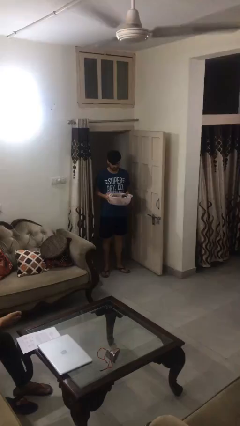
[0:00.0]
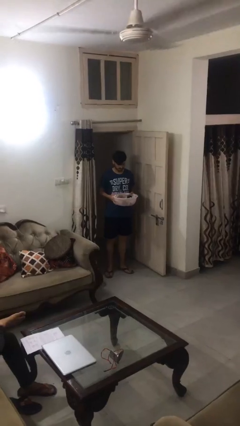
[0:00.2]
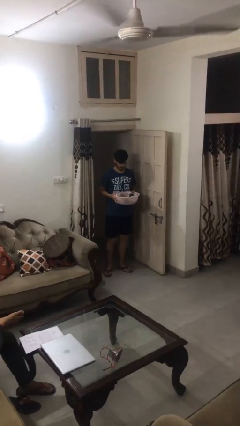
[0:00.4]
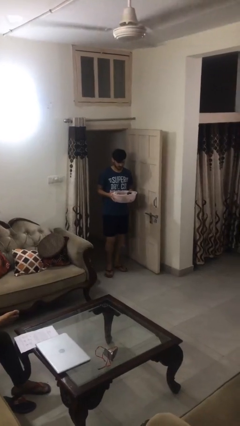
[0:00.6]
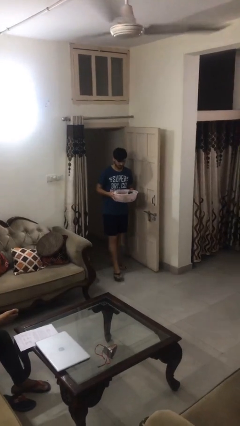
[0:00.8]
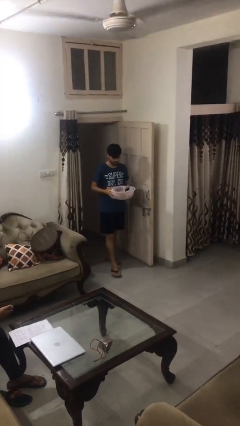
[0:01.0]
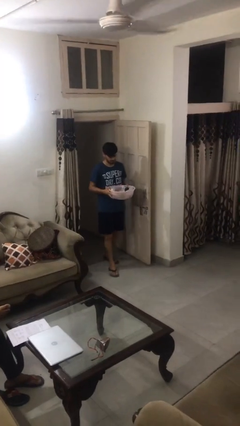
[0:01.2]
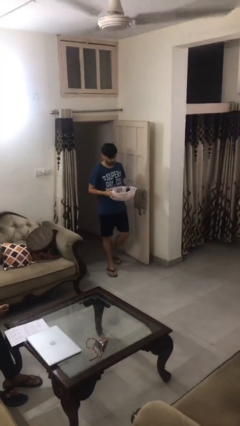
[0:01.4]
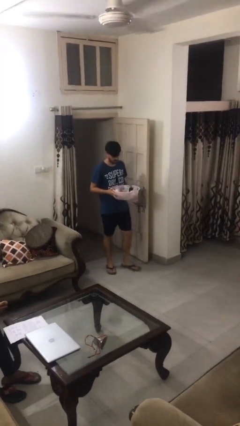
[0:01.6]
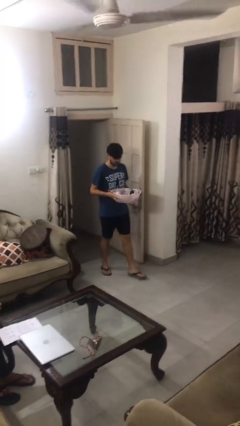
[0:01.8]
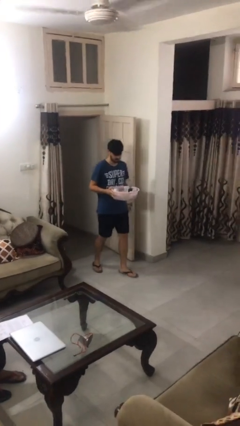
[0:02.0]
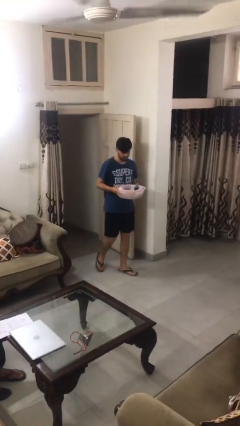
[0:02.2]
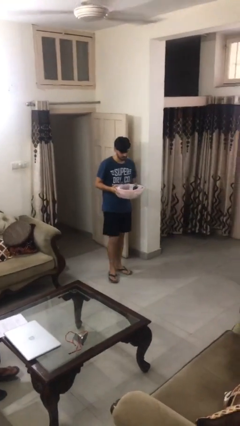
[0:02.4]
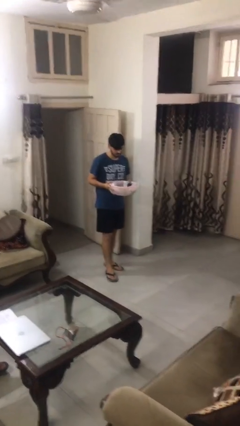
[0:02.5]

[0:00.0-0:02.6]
person carries groceries

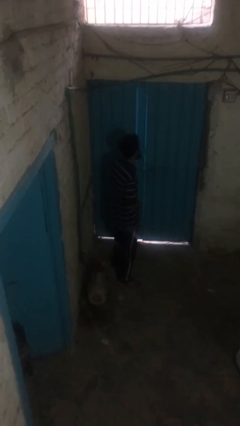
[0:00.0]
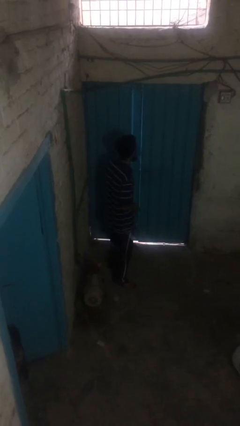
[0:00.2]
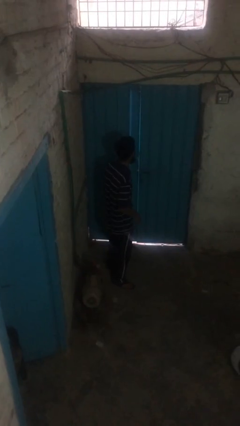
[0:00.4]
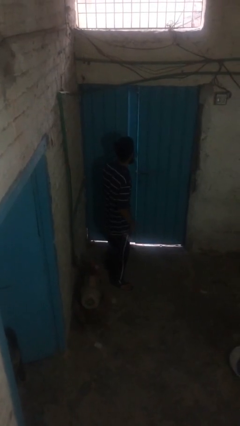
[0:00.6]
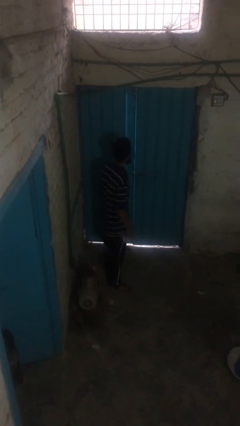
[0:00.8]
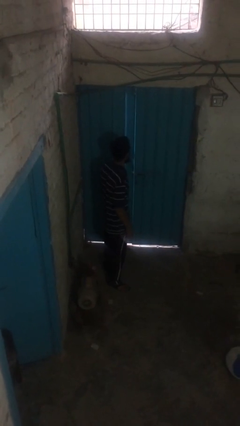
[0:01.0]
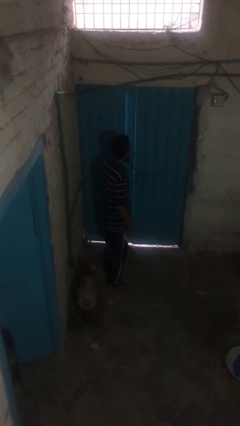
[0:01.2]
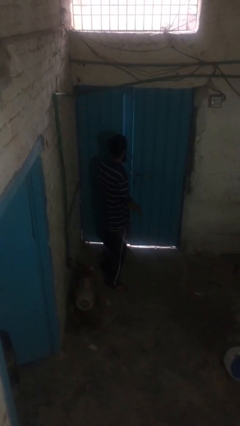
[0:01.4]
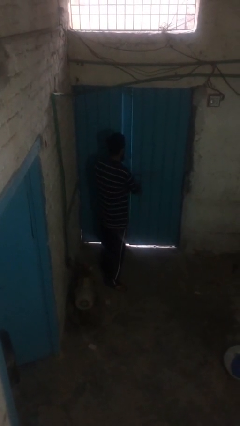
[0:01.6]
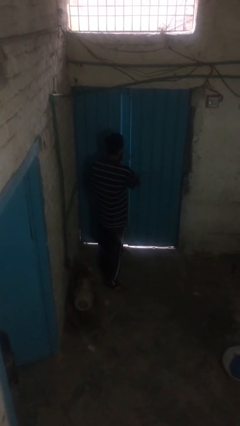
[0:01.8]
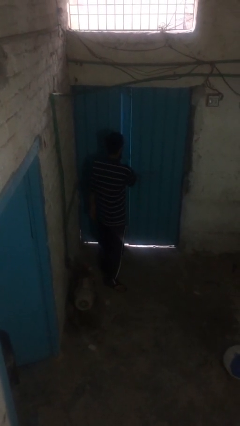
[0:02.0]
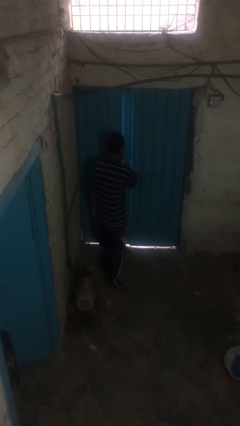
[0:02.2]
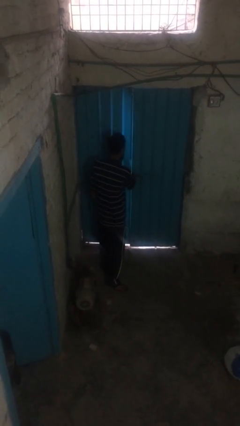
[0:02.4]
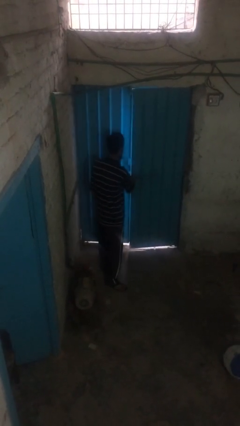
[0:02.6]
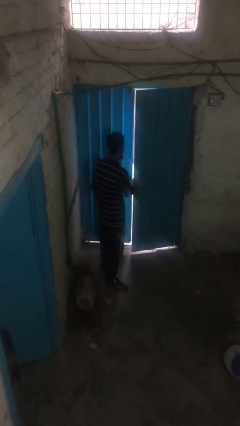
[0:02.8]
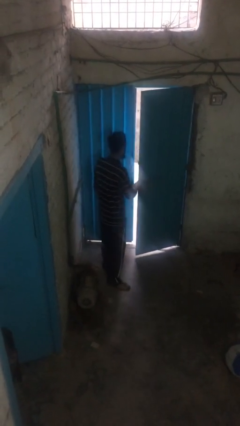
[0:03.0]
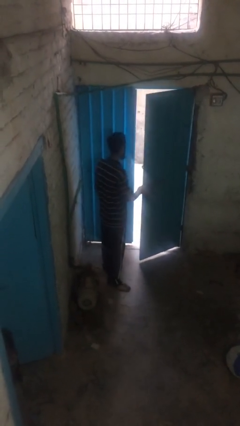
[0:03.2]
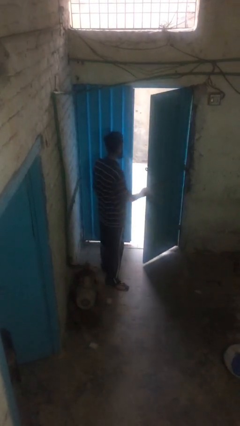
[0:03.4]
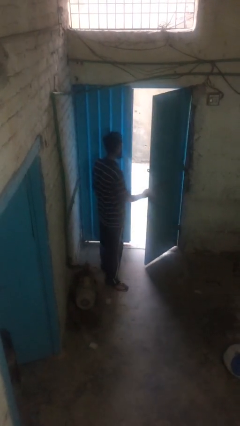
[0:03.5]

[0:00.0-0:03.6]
person opens facility door

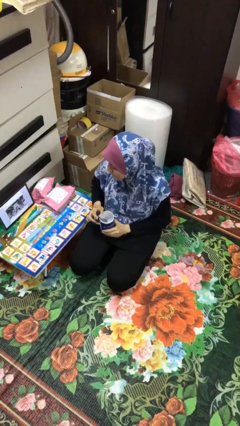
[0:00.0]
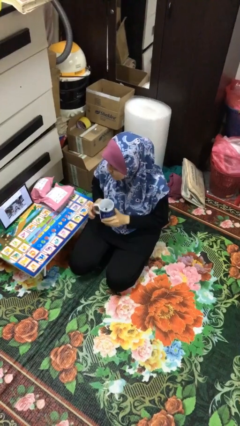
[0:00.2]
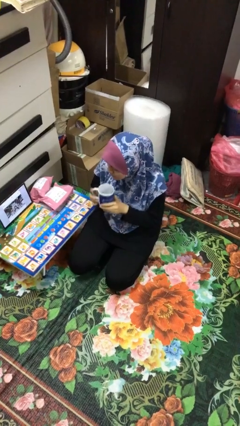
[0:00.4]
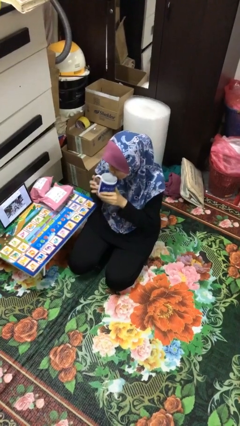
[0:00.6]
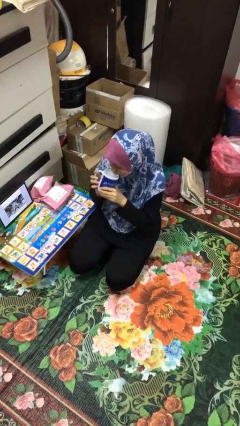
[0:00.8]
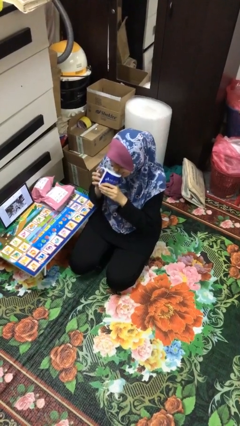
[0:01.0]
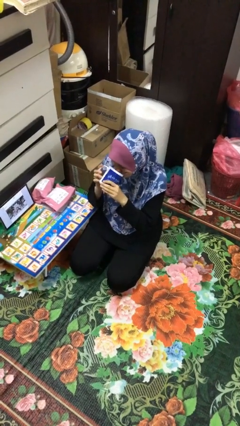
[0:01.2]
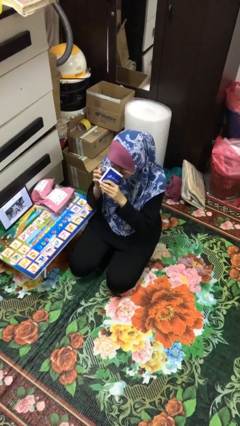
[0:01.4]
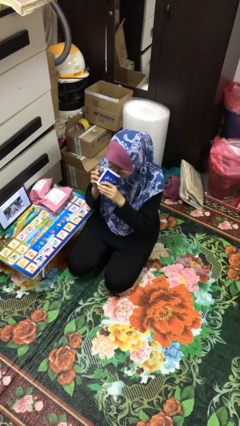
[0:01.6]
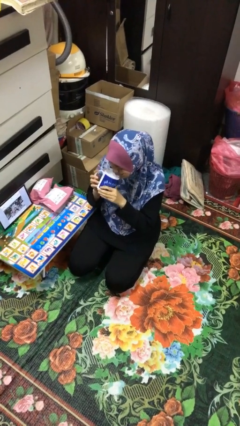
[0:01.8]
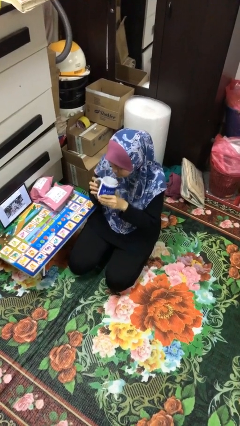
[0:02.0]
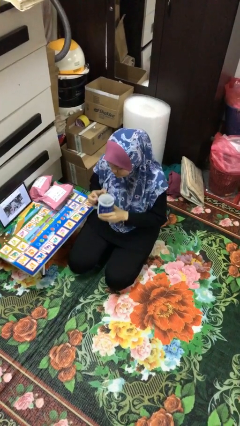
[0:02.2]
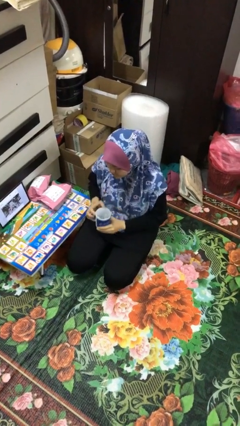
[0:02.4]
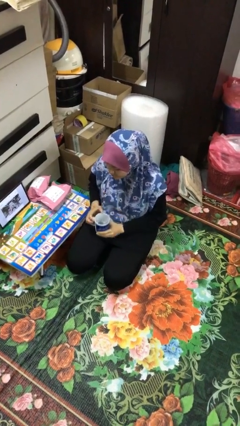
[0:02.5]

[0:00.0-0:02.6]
person drinks from mug

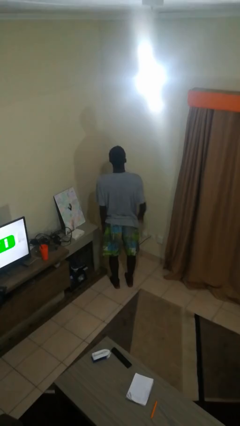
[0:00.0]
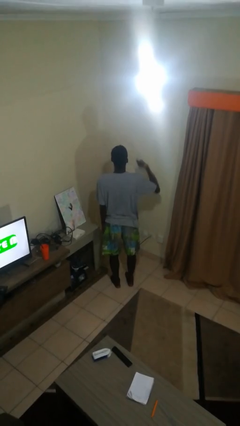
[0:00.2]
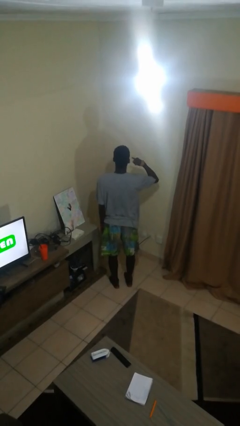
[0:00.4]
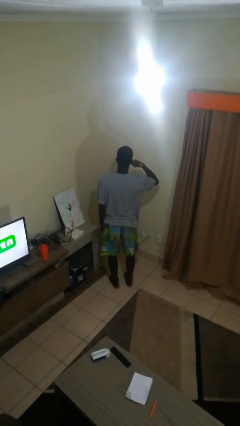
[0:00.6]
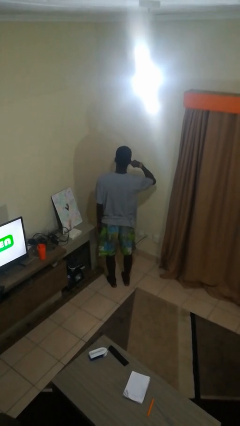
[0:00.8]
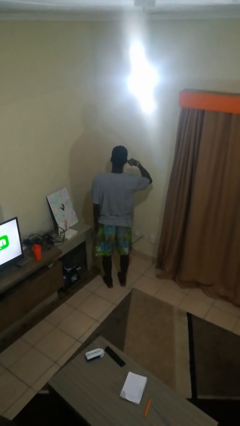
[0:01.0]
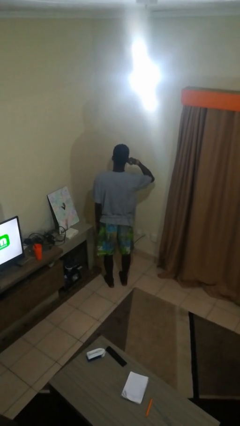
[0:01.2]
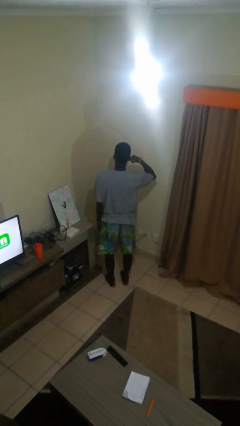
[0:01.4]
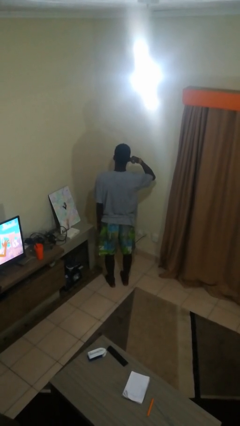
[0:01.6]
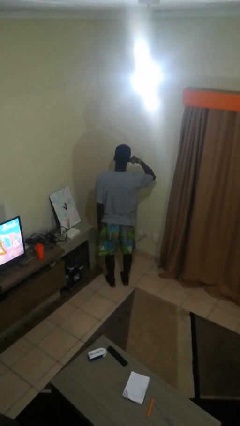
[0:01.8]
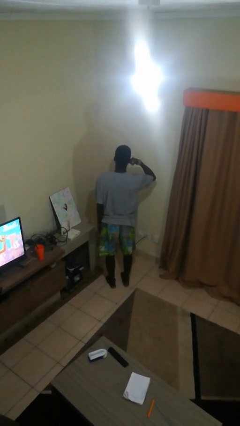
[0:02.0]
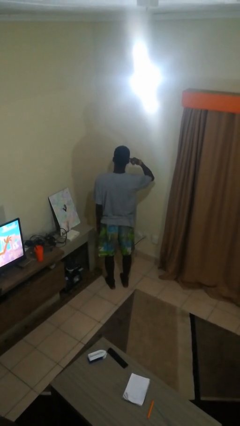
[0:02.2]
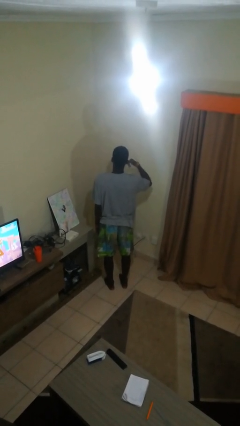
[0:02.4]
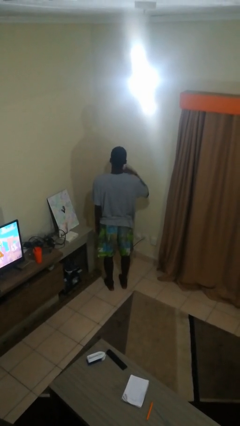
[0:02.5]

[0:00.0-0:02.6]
person gestures call me

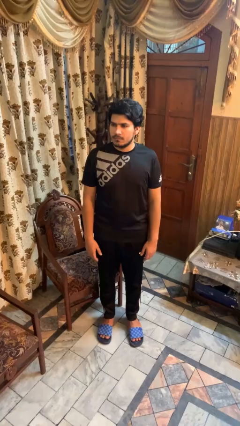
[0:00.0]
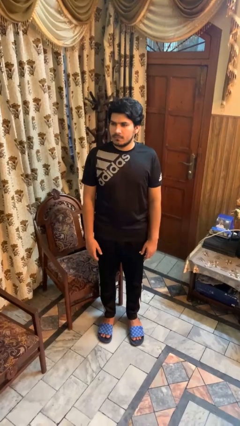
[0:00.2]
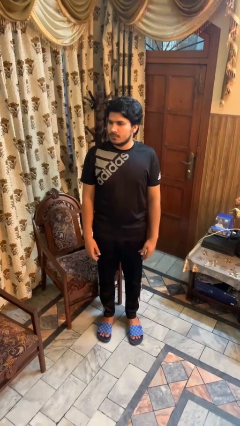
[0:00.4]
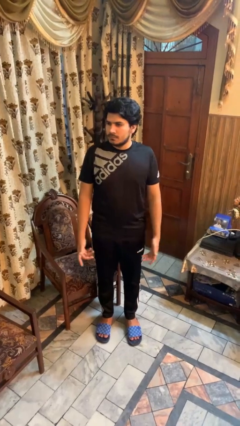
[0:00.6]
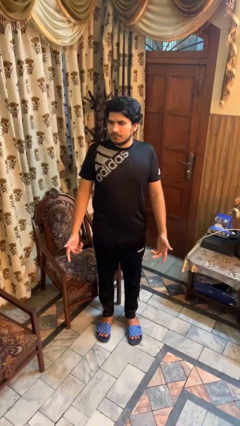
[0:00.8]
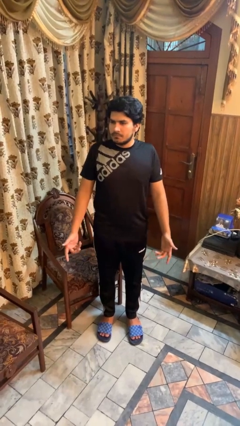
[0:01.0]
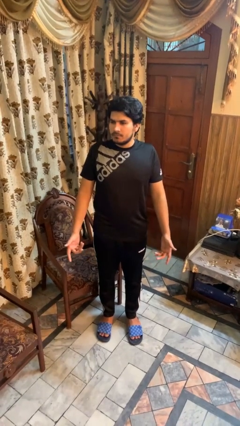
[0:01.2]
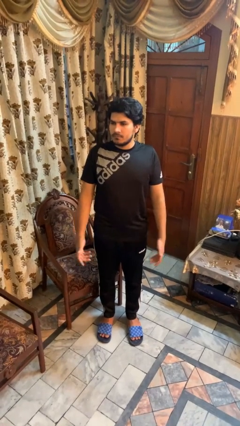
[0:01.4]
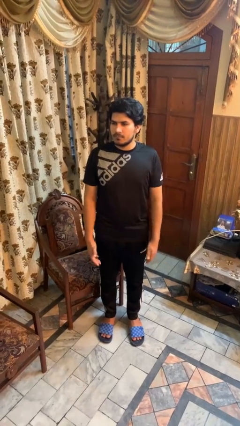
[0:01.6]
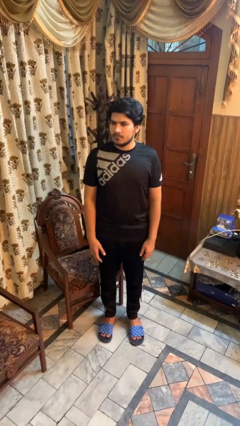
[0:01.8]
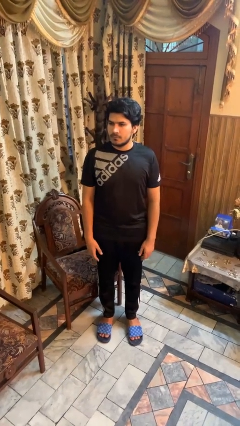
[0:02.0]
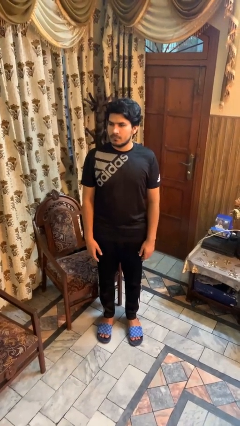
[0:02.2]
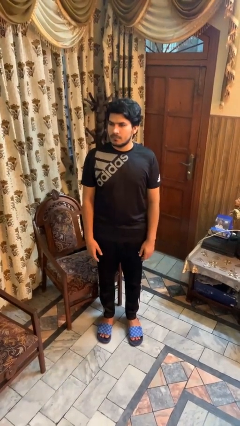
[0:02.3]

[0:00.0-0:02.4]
person shrugs

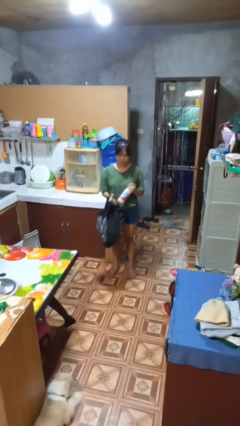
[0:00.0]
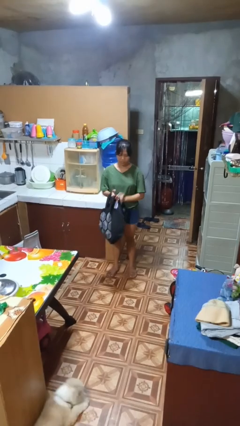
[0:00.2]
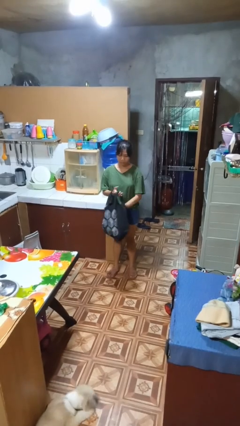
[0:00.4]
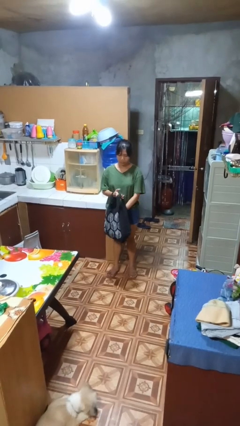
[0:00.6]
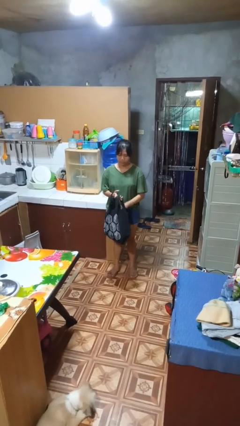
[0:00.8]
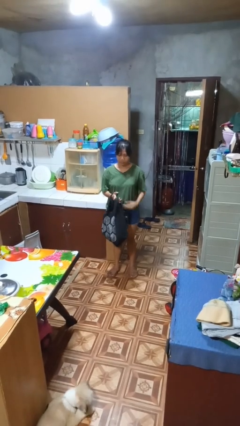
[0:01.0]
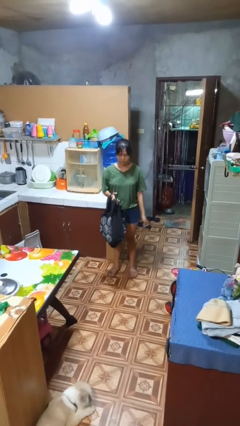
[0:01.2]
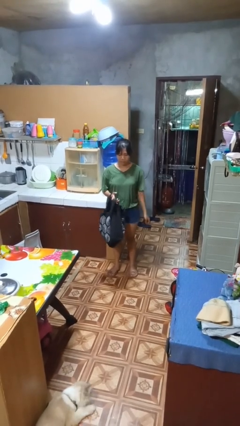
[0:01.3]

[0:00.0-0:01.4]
person puts object into bag

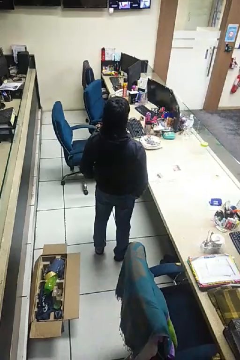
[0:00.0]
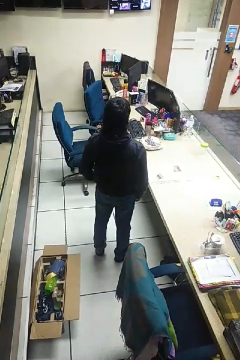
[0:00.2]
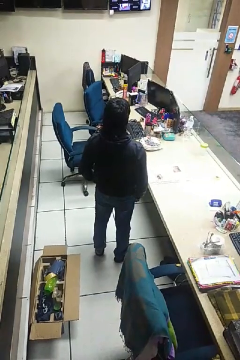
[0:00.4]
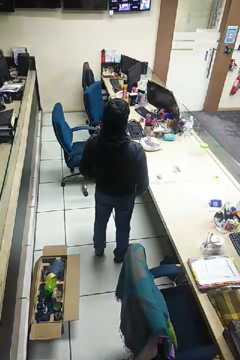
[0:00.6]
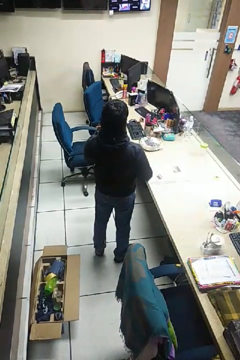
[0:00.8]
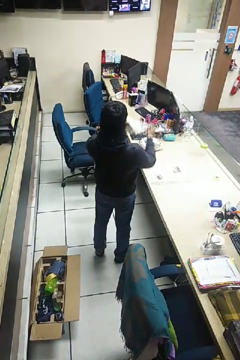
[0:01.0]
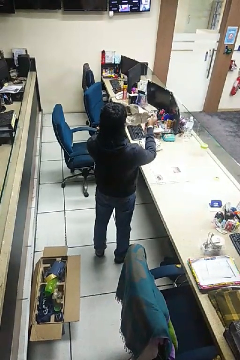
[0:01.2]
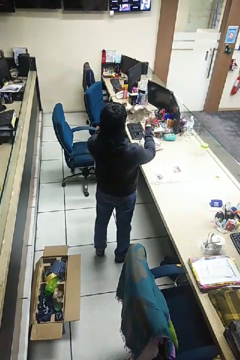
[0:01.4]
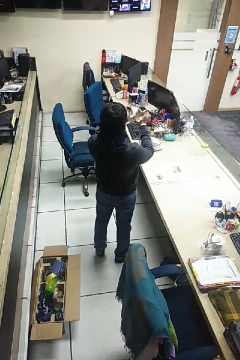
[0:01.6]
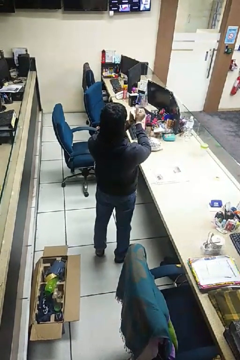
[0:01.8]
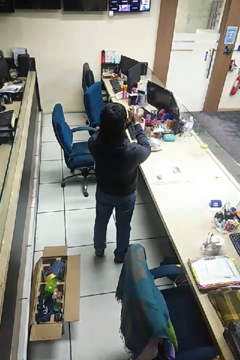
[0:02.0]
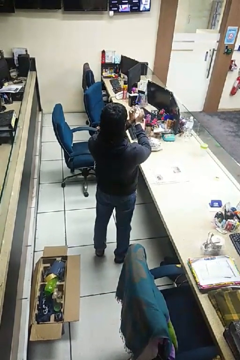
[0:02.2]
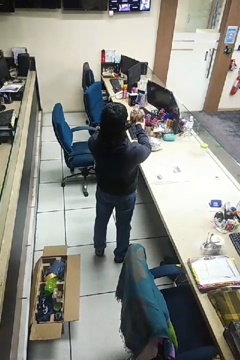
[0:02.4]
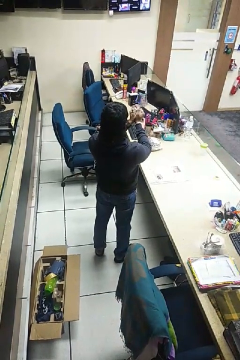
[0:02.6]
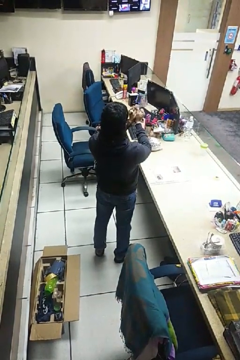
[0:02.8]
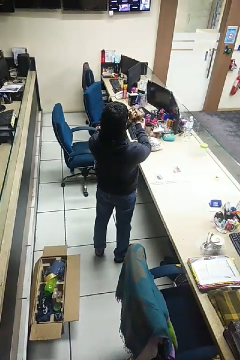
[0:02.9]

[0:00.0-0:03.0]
person crumples paper
